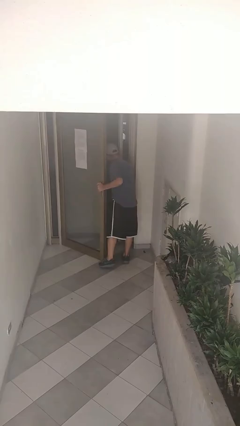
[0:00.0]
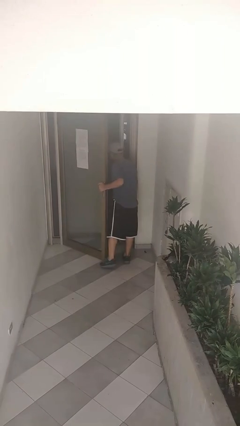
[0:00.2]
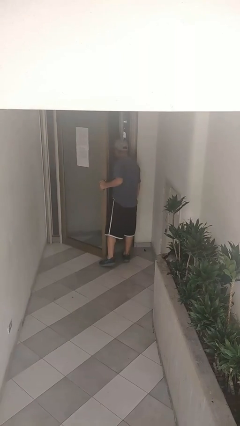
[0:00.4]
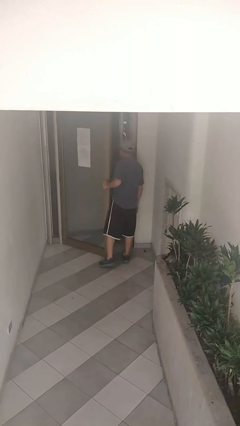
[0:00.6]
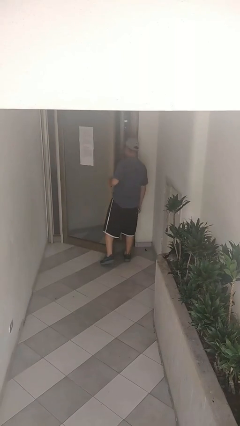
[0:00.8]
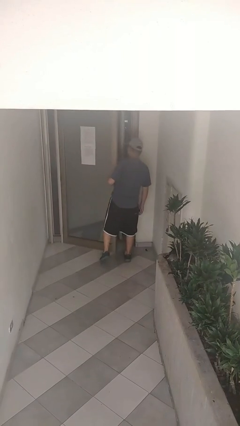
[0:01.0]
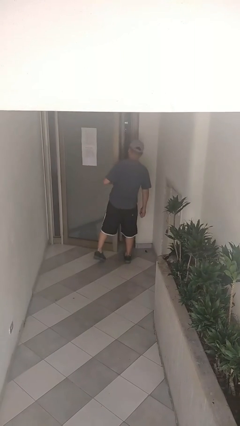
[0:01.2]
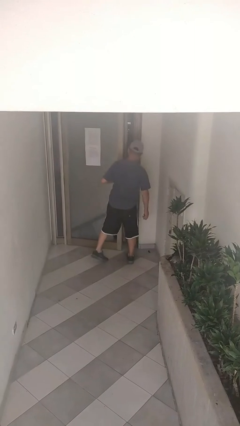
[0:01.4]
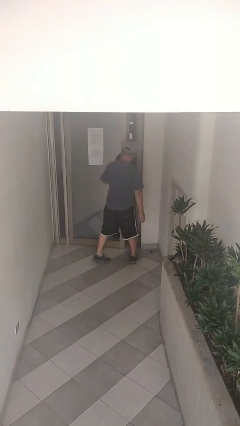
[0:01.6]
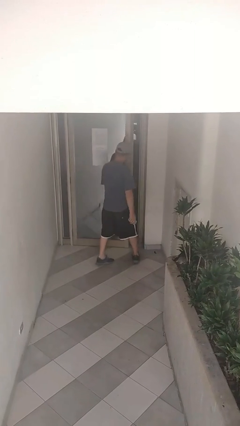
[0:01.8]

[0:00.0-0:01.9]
person closes facility door

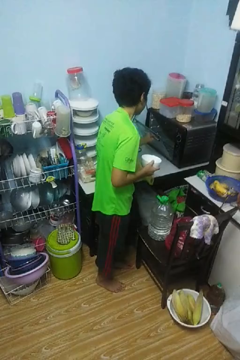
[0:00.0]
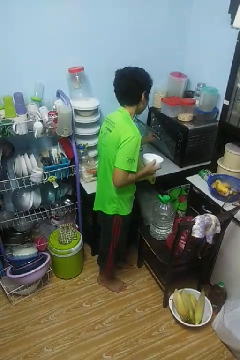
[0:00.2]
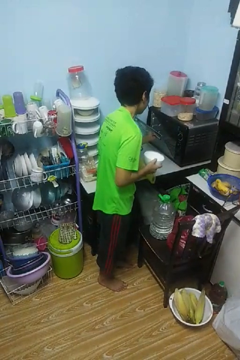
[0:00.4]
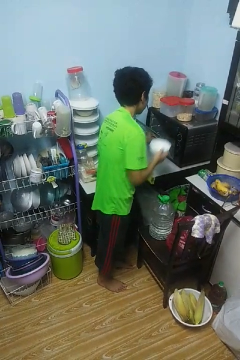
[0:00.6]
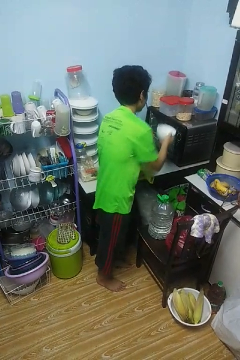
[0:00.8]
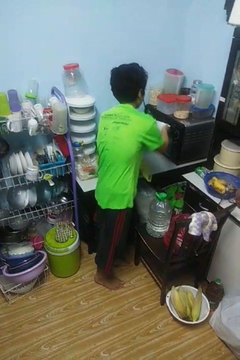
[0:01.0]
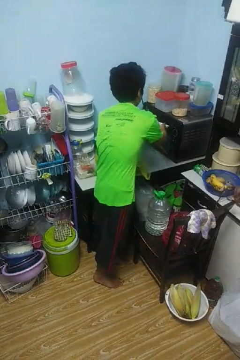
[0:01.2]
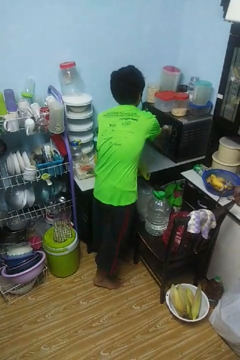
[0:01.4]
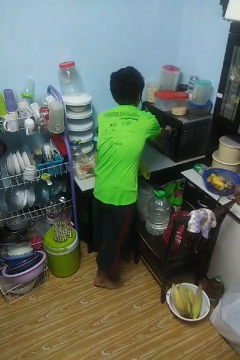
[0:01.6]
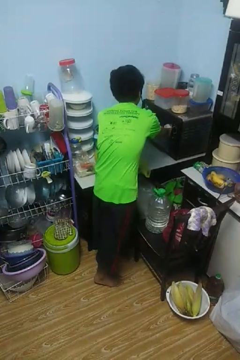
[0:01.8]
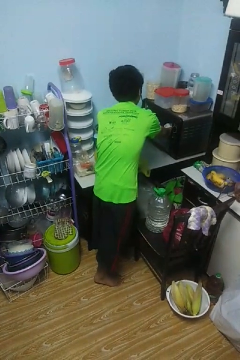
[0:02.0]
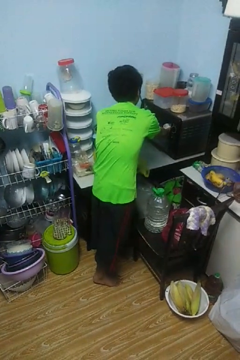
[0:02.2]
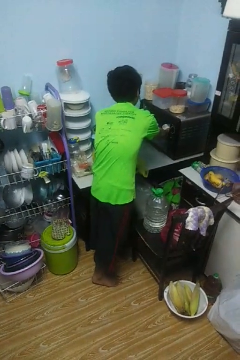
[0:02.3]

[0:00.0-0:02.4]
person puts object into microwave

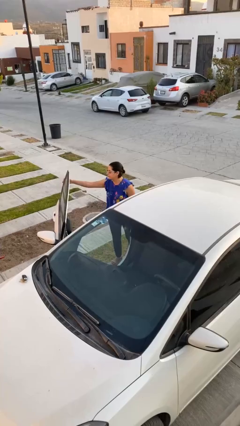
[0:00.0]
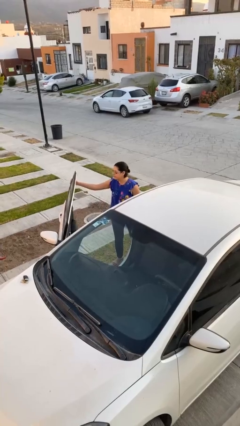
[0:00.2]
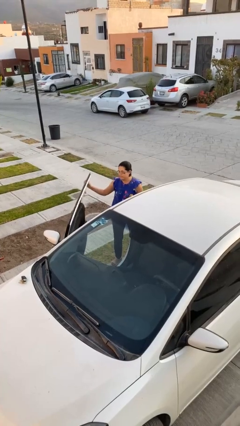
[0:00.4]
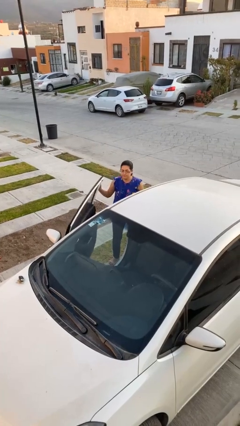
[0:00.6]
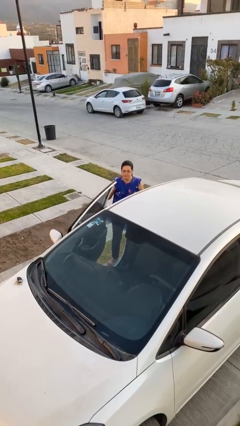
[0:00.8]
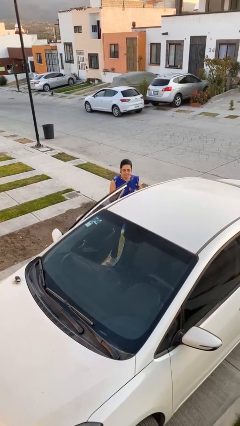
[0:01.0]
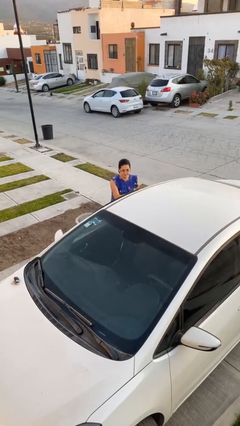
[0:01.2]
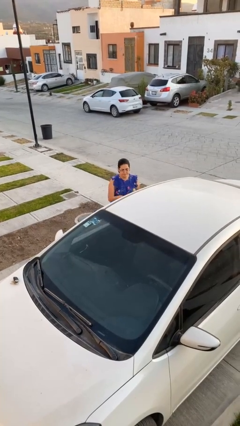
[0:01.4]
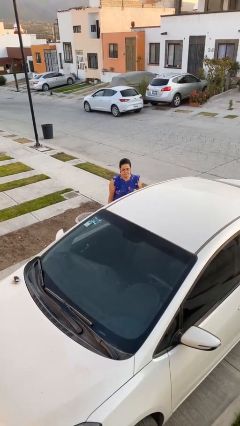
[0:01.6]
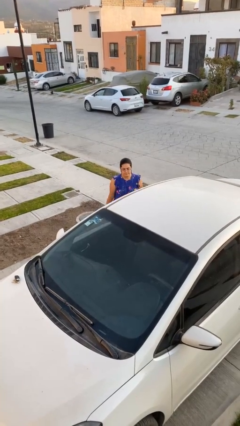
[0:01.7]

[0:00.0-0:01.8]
person closes car door

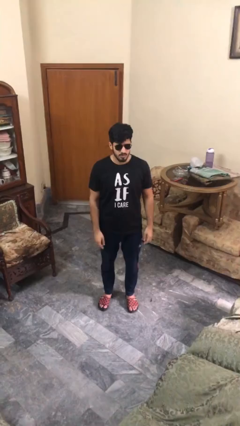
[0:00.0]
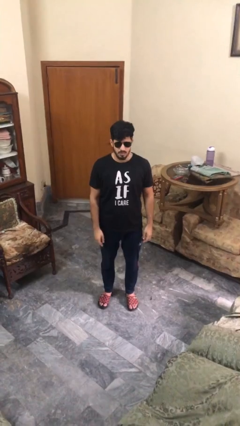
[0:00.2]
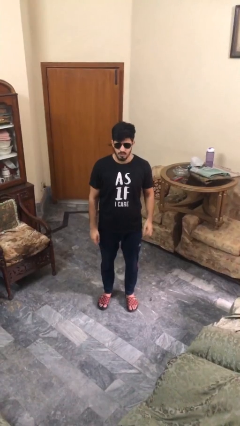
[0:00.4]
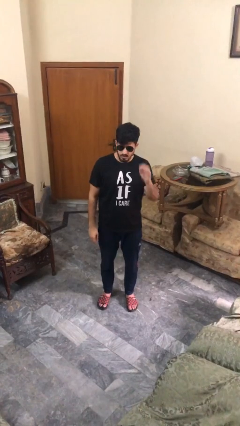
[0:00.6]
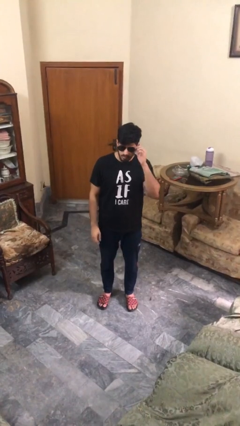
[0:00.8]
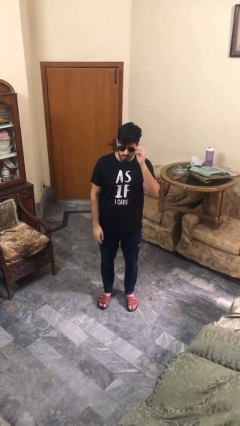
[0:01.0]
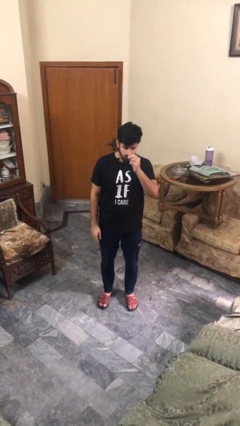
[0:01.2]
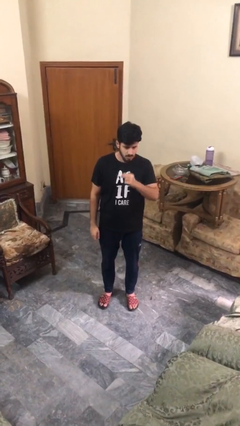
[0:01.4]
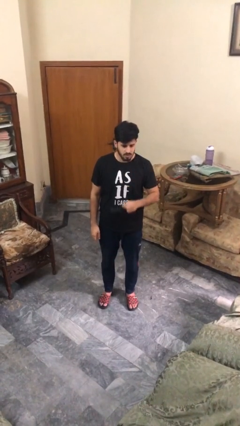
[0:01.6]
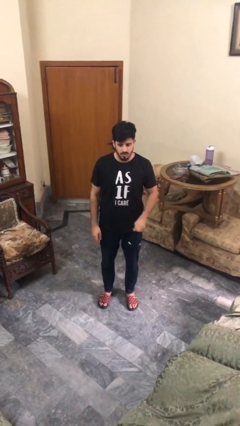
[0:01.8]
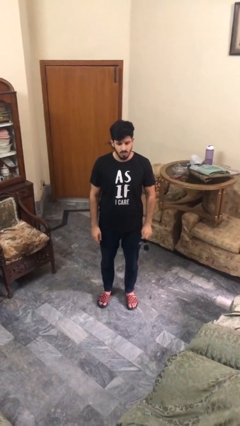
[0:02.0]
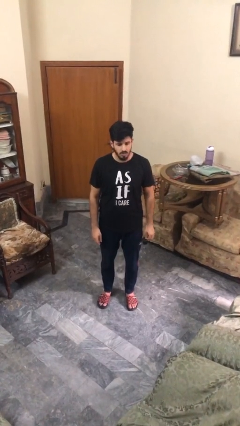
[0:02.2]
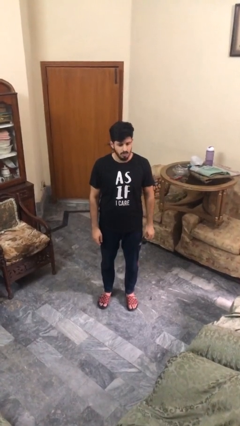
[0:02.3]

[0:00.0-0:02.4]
person takes off sunglasses

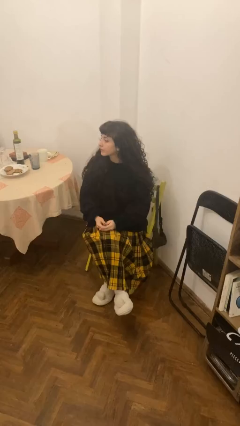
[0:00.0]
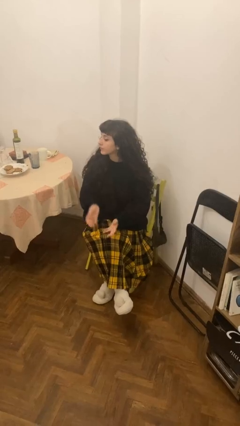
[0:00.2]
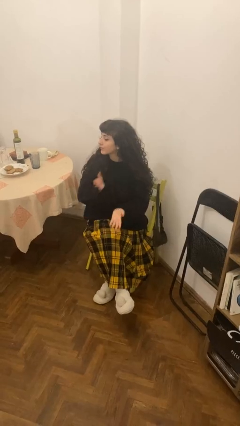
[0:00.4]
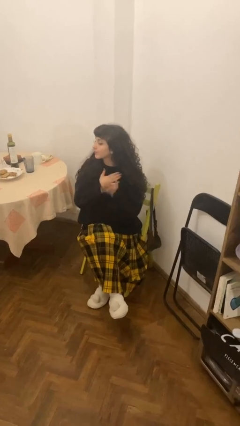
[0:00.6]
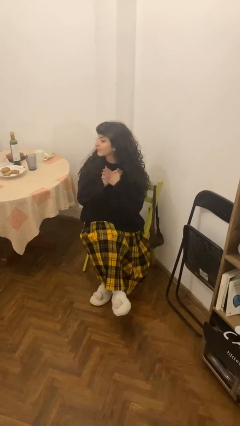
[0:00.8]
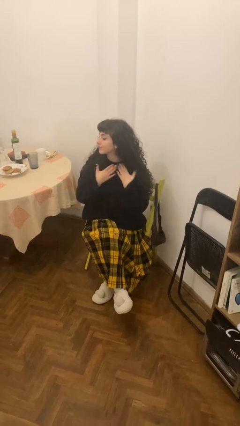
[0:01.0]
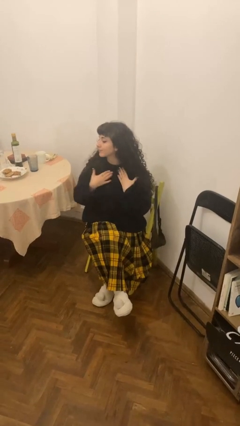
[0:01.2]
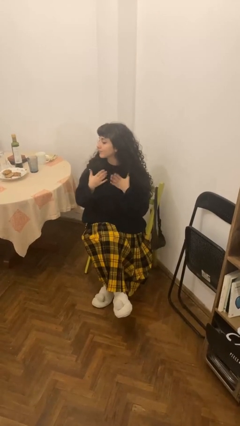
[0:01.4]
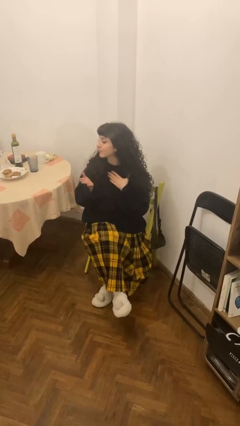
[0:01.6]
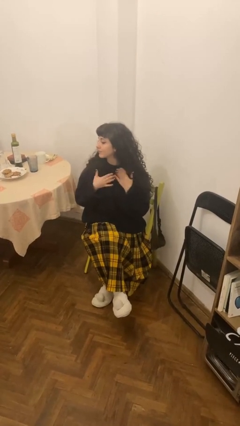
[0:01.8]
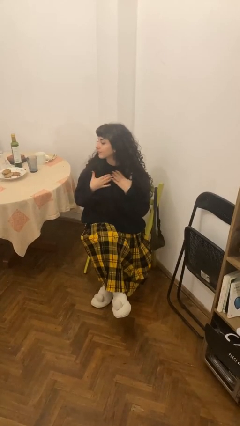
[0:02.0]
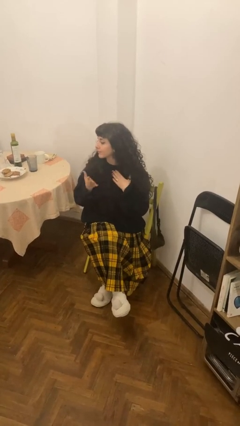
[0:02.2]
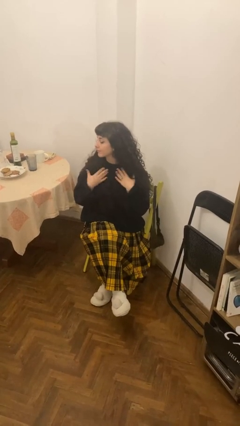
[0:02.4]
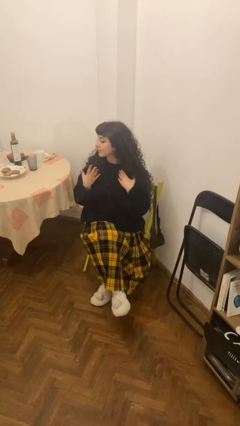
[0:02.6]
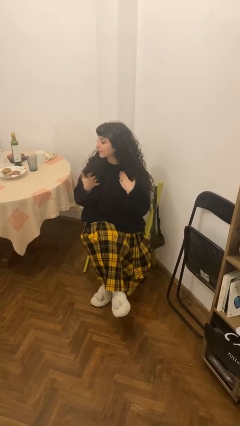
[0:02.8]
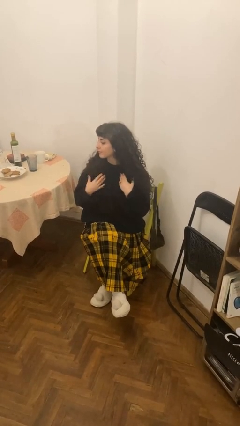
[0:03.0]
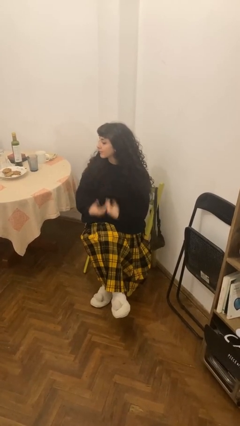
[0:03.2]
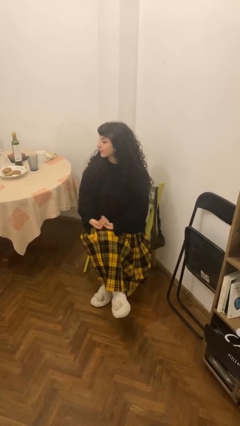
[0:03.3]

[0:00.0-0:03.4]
person drums on chest

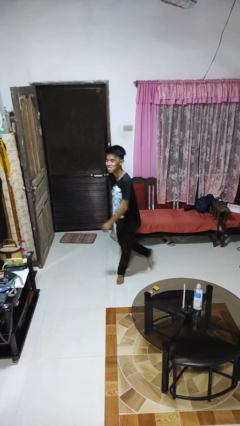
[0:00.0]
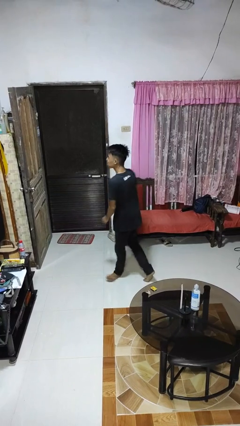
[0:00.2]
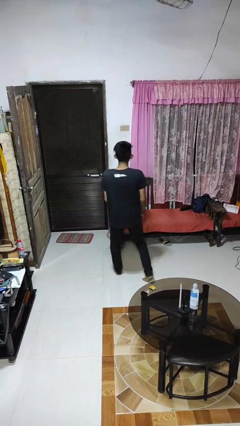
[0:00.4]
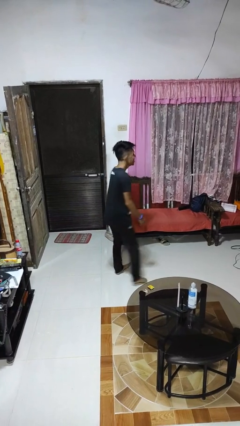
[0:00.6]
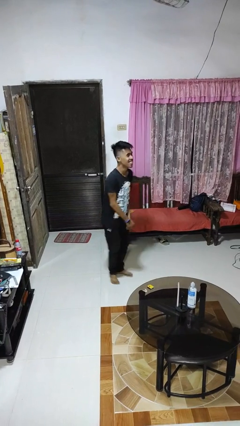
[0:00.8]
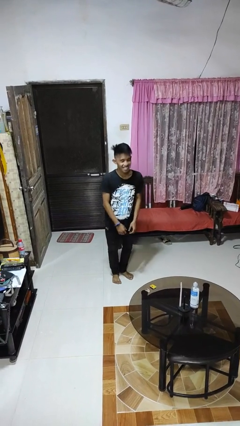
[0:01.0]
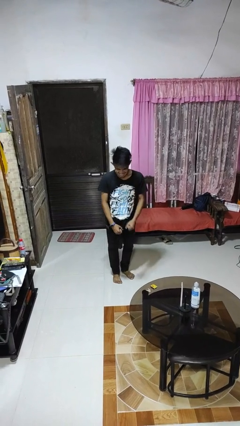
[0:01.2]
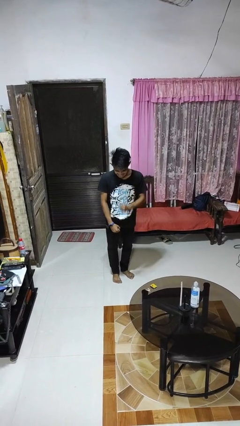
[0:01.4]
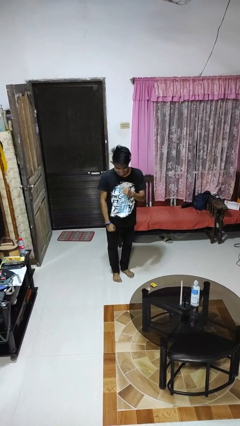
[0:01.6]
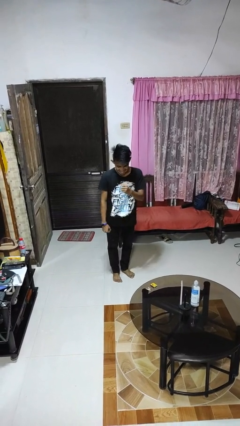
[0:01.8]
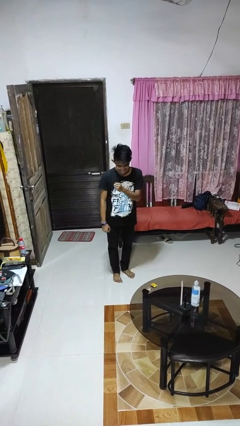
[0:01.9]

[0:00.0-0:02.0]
person twirls

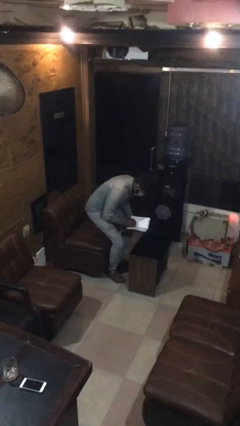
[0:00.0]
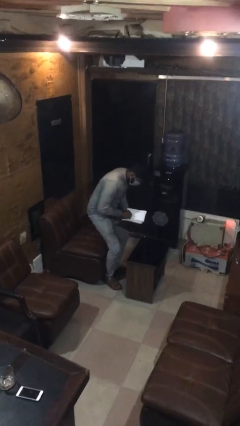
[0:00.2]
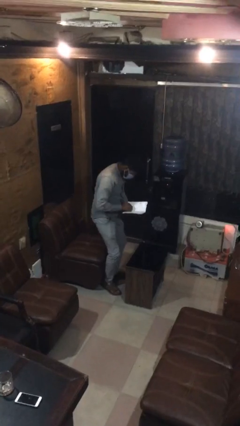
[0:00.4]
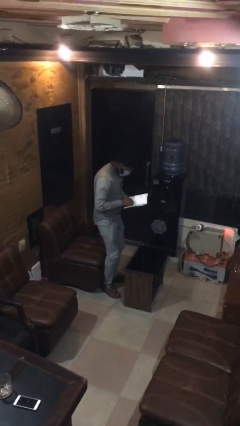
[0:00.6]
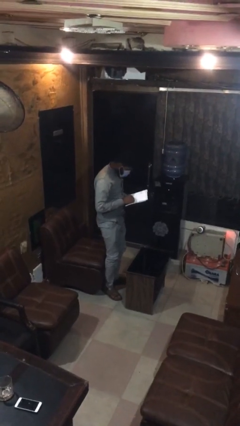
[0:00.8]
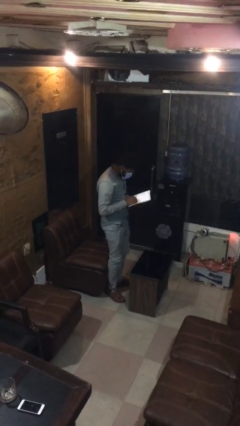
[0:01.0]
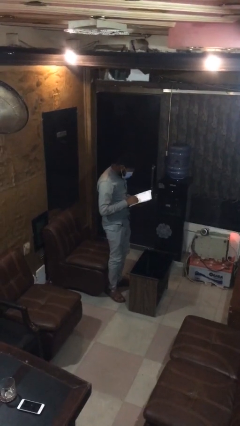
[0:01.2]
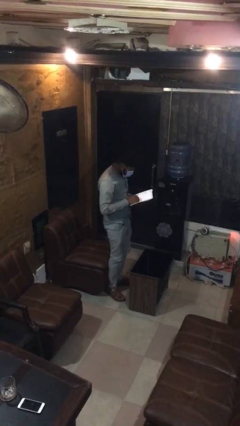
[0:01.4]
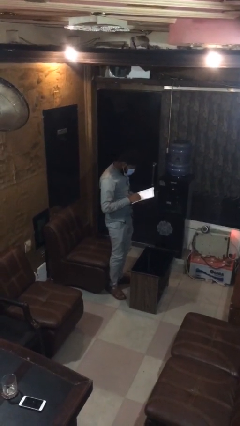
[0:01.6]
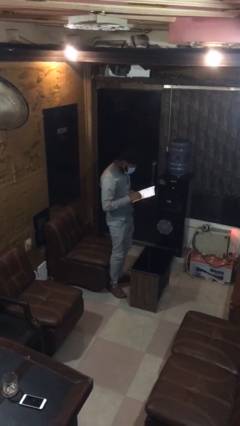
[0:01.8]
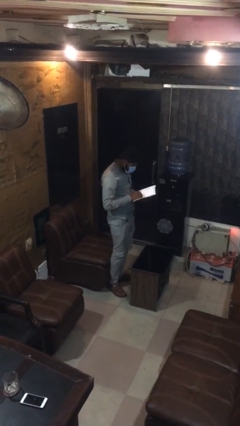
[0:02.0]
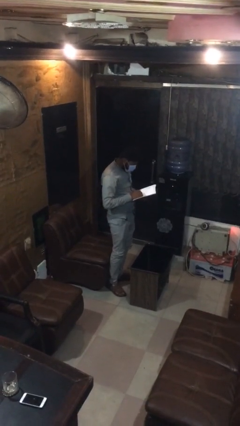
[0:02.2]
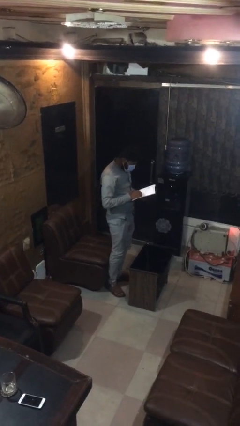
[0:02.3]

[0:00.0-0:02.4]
person stands up

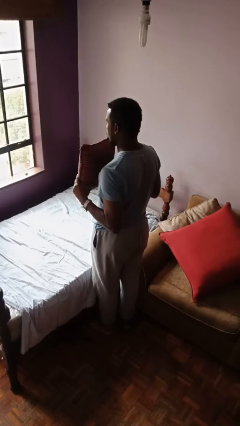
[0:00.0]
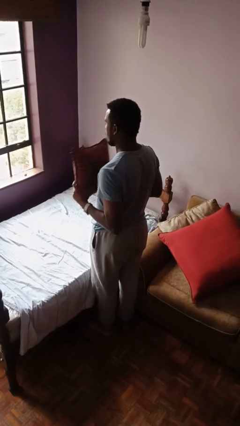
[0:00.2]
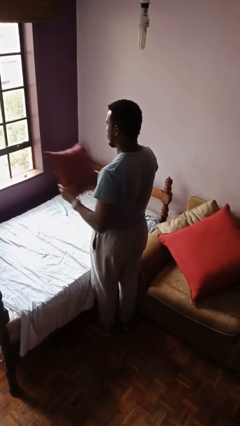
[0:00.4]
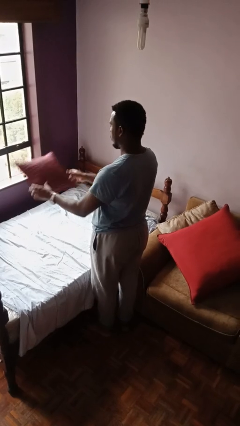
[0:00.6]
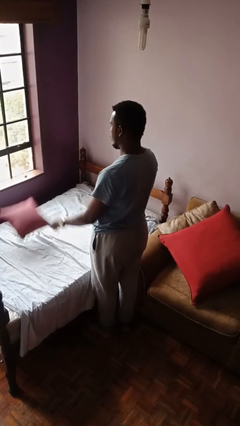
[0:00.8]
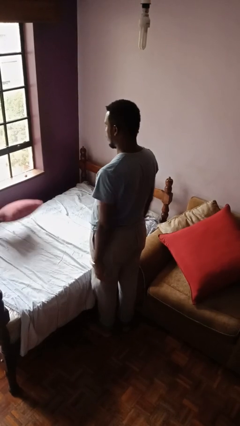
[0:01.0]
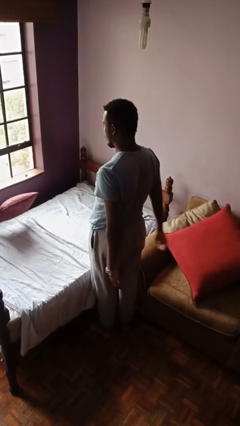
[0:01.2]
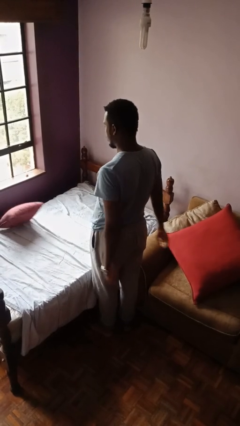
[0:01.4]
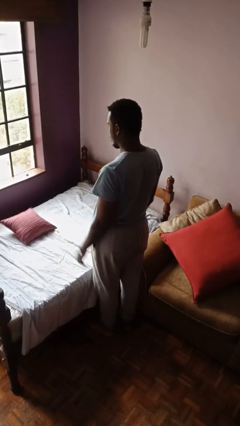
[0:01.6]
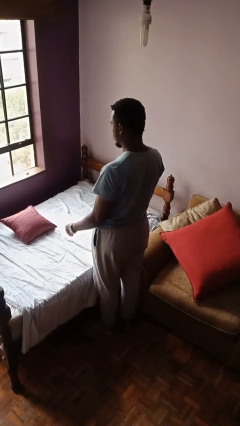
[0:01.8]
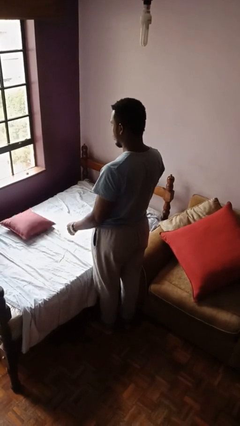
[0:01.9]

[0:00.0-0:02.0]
person throws object on bed
